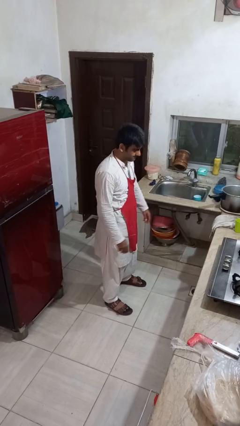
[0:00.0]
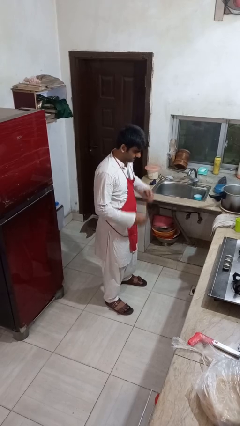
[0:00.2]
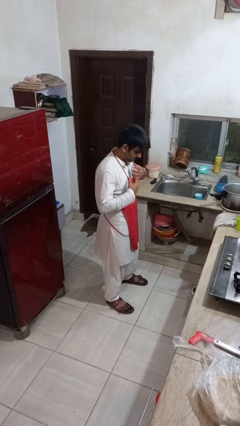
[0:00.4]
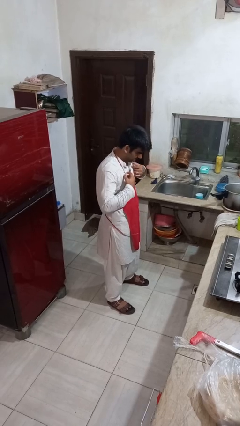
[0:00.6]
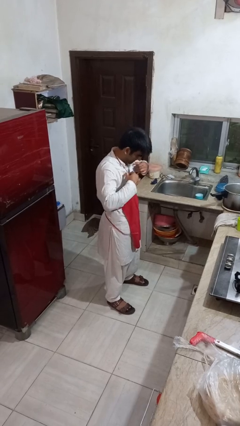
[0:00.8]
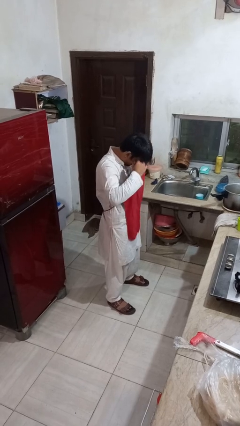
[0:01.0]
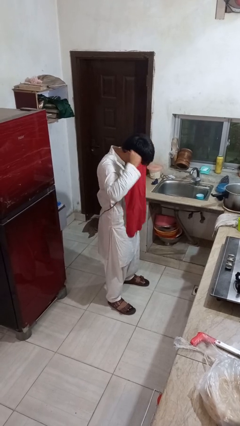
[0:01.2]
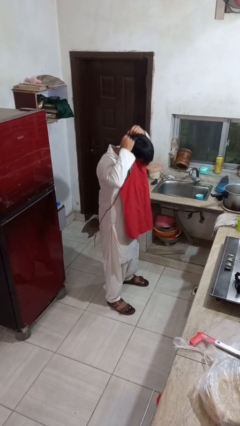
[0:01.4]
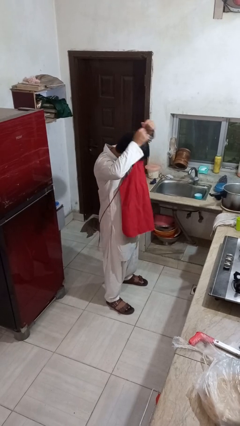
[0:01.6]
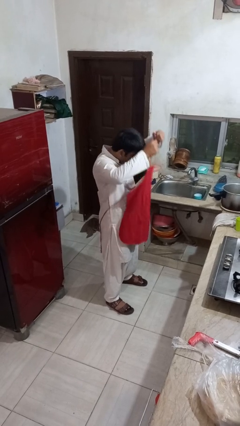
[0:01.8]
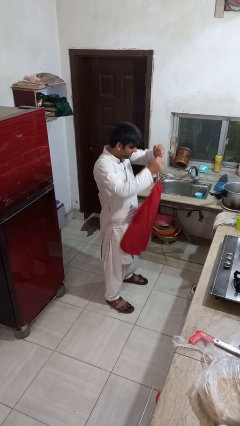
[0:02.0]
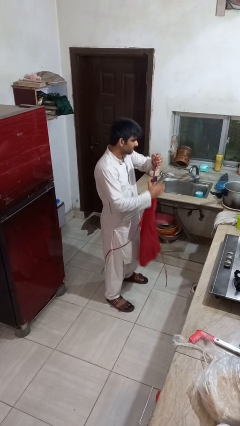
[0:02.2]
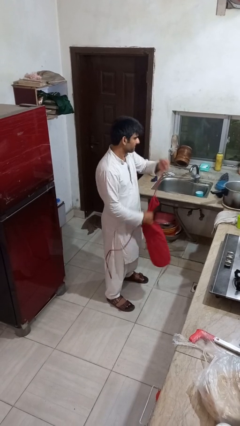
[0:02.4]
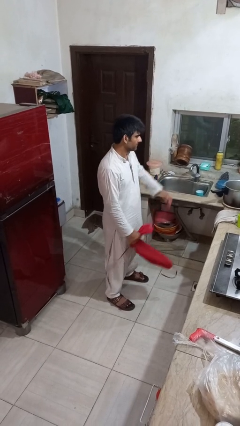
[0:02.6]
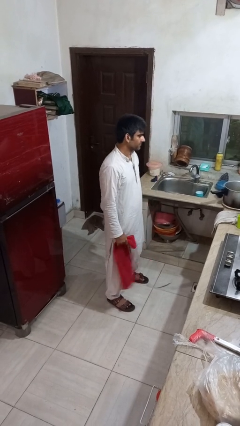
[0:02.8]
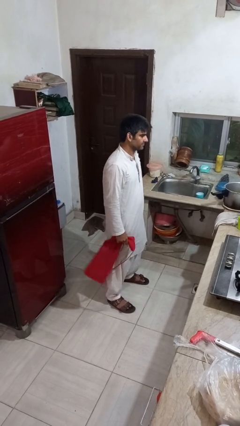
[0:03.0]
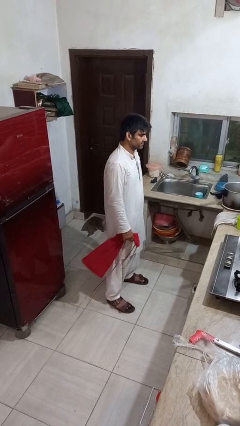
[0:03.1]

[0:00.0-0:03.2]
person takes off apron

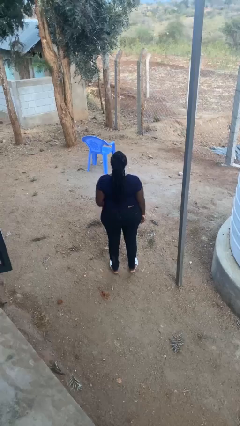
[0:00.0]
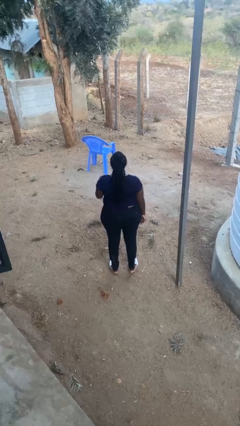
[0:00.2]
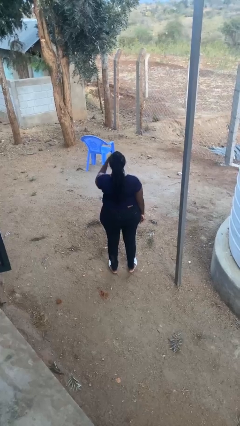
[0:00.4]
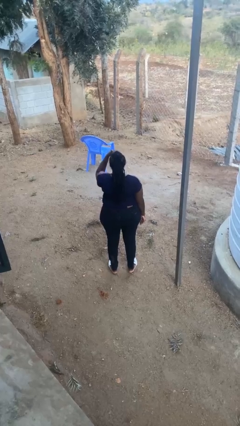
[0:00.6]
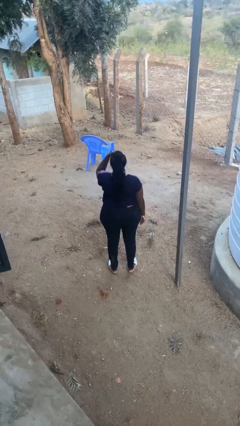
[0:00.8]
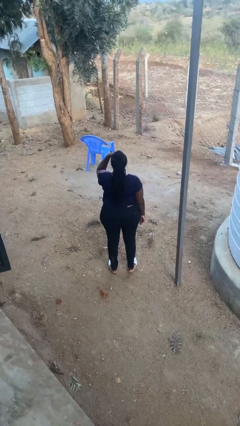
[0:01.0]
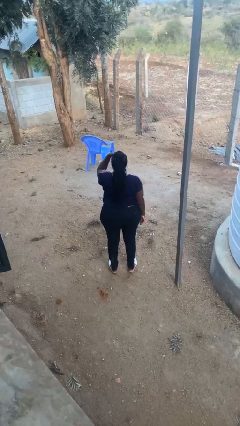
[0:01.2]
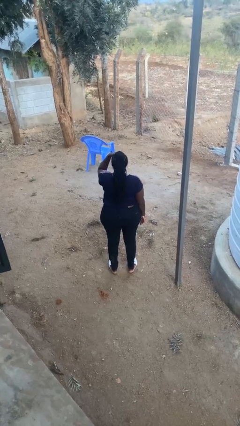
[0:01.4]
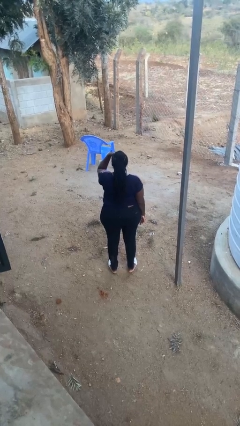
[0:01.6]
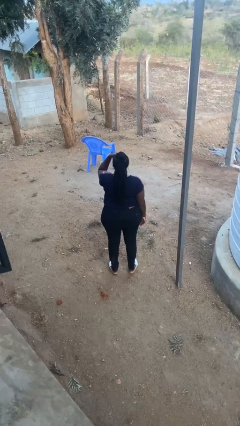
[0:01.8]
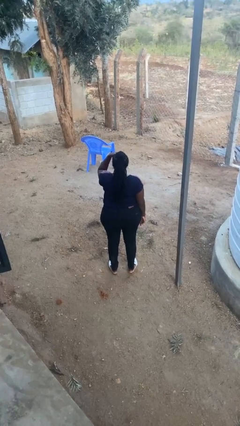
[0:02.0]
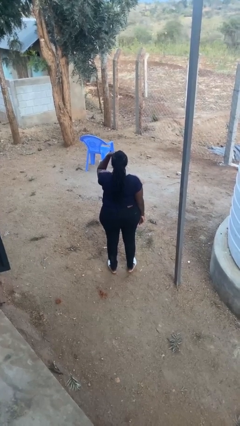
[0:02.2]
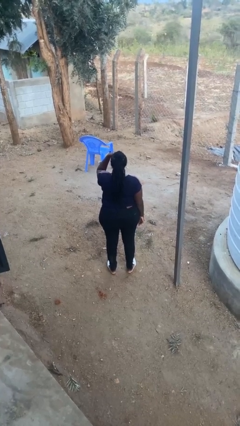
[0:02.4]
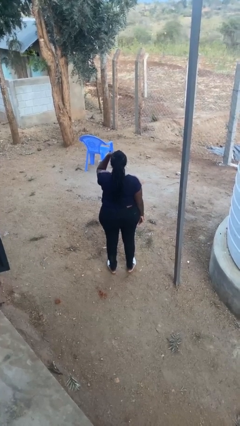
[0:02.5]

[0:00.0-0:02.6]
person shades eyes

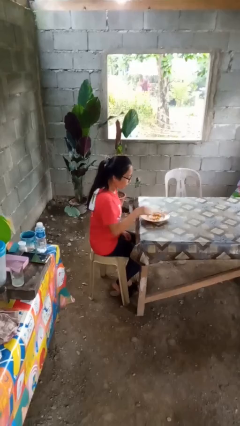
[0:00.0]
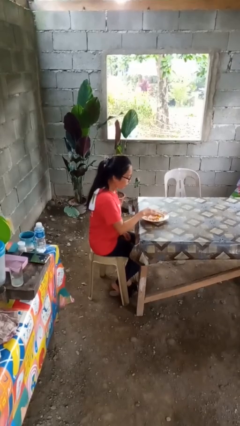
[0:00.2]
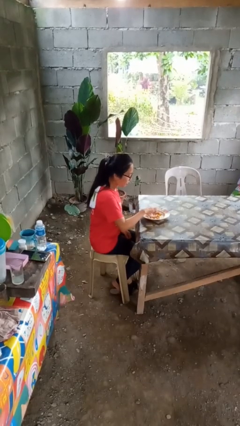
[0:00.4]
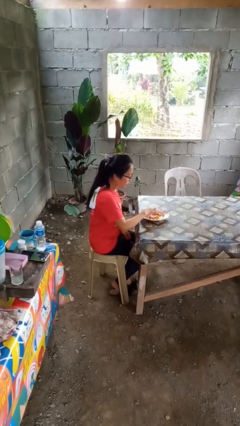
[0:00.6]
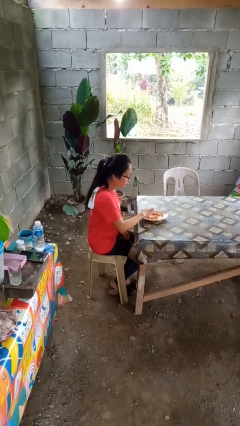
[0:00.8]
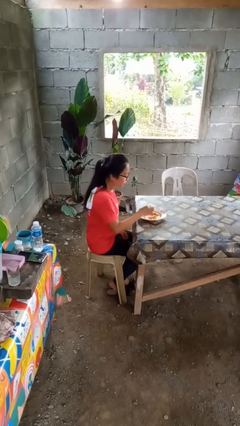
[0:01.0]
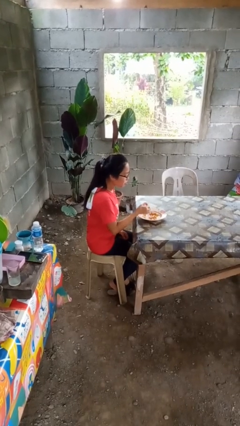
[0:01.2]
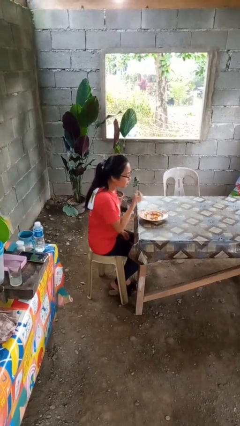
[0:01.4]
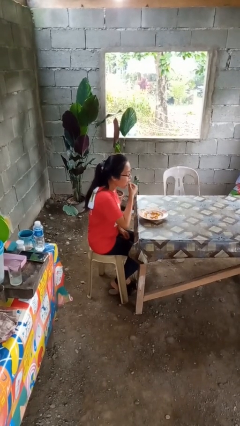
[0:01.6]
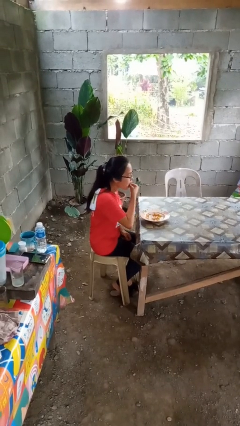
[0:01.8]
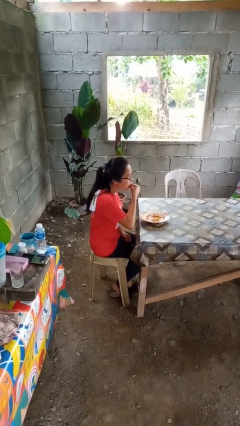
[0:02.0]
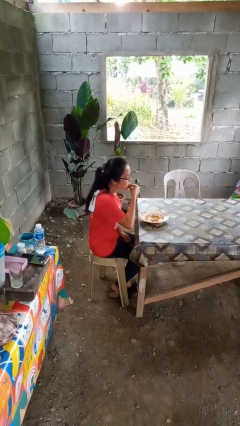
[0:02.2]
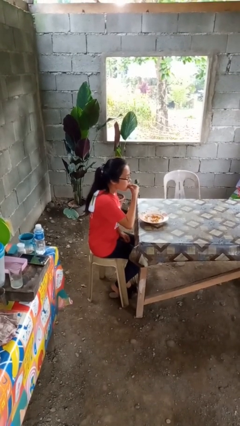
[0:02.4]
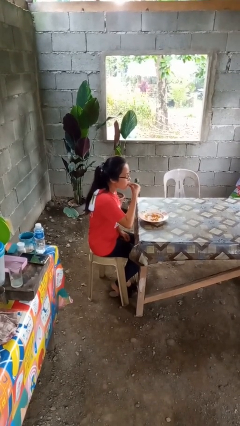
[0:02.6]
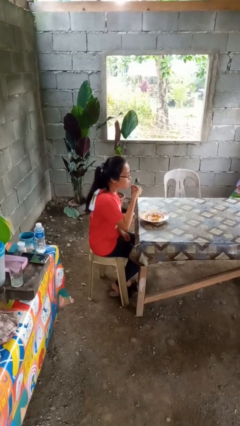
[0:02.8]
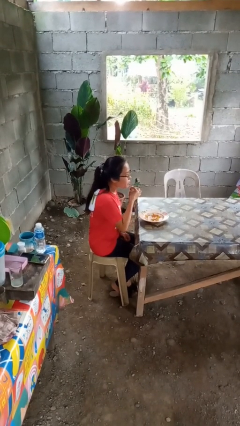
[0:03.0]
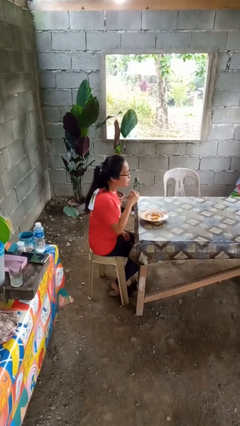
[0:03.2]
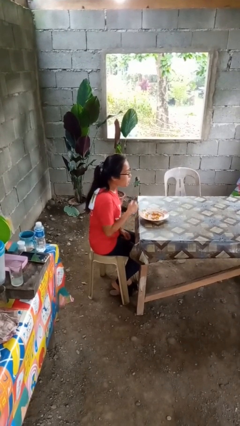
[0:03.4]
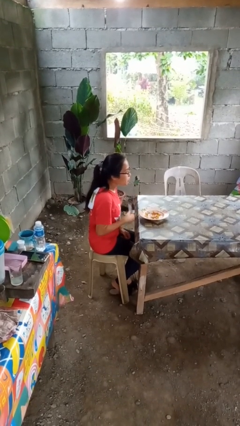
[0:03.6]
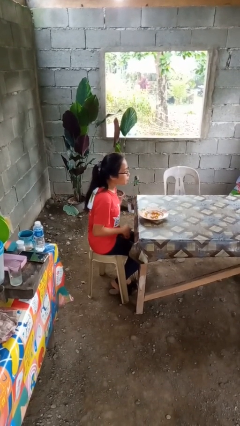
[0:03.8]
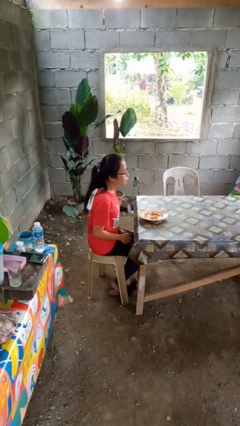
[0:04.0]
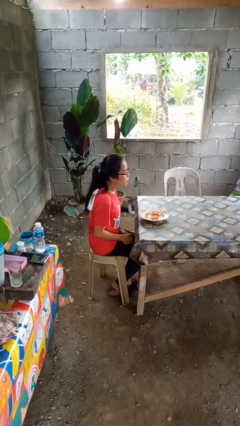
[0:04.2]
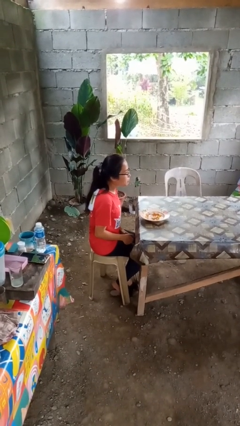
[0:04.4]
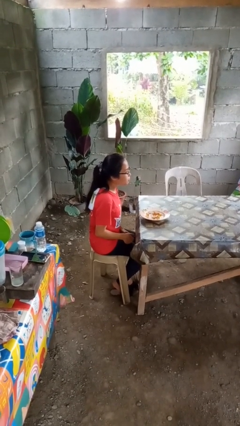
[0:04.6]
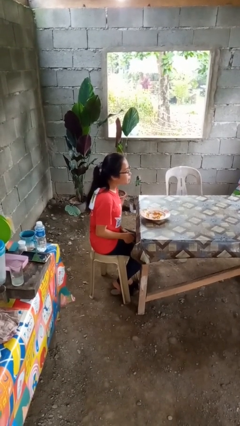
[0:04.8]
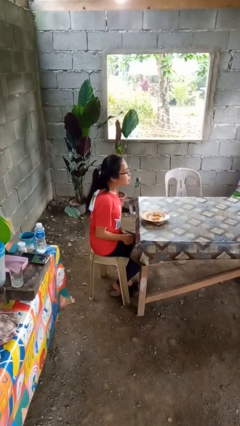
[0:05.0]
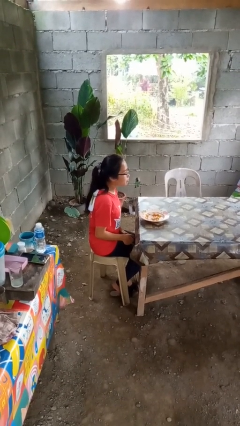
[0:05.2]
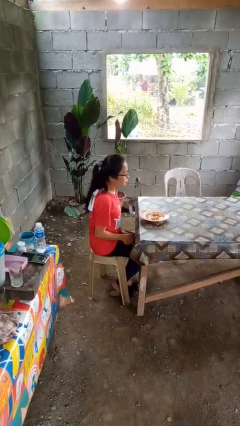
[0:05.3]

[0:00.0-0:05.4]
person eats with hands

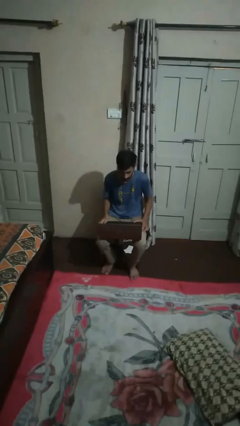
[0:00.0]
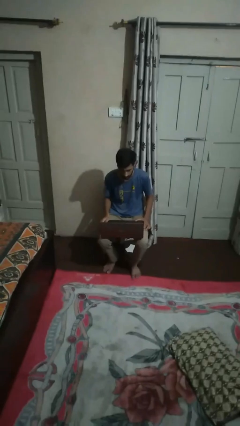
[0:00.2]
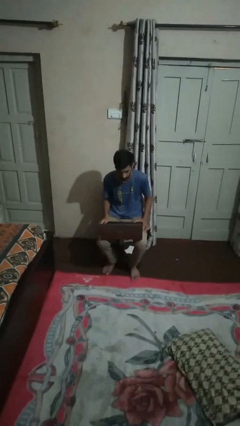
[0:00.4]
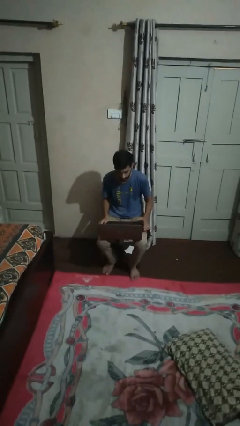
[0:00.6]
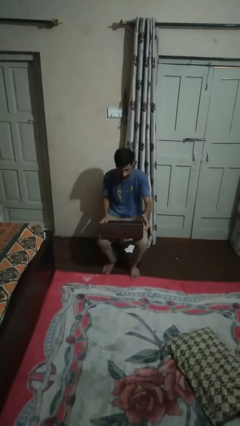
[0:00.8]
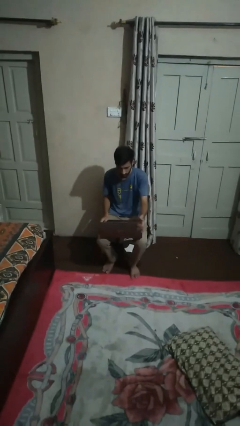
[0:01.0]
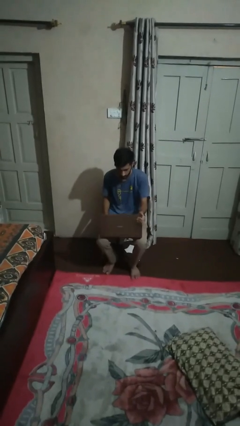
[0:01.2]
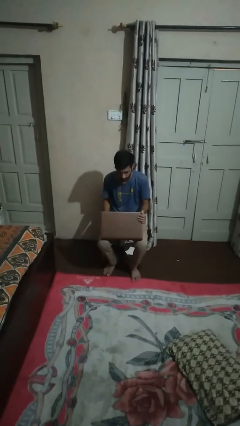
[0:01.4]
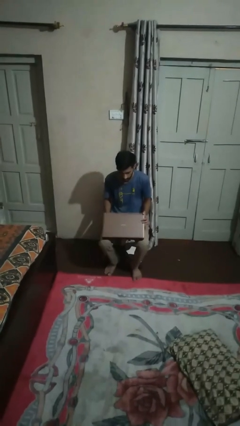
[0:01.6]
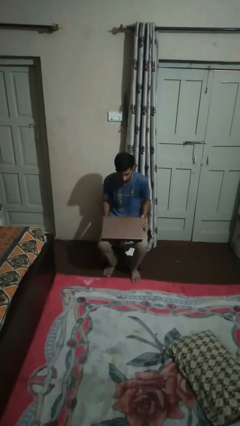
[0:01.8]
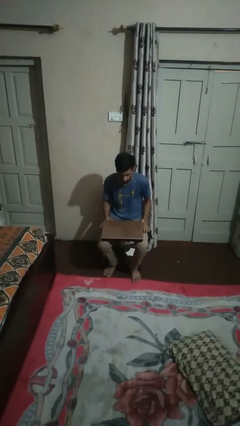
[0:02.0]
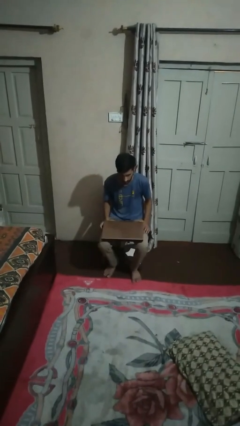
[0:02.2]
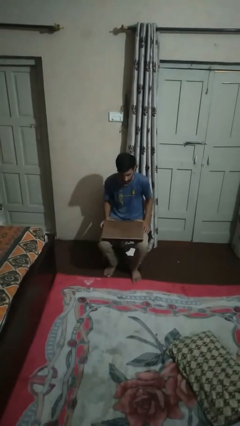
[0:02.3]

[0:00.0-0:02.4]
person closes laptop

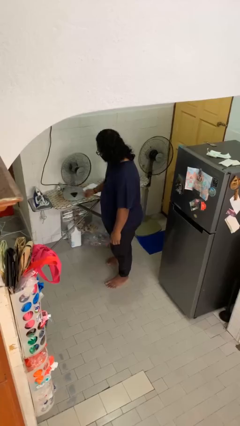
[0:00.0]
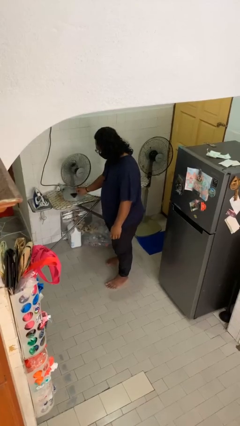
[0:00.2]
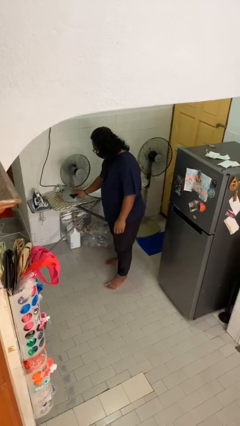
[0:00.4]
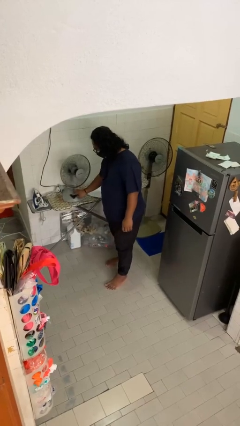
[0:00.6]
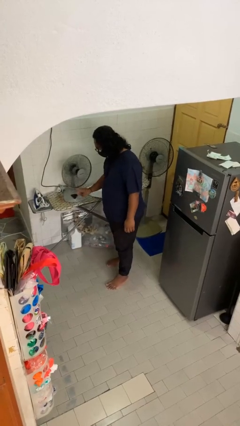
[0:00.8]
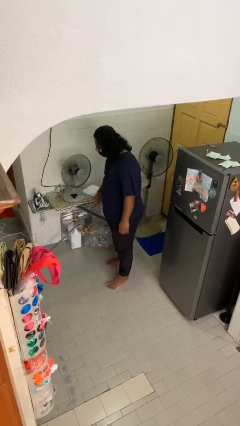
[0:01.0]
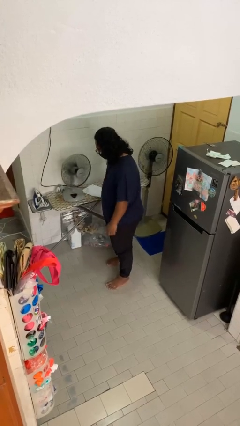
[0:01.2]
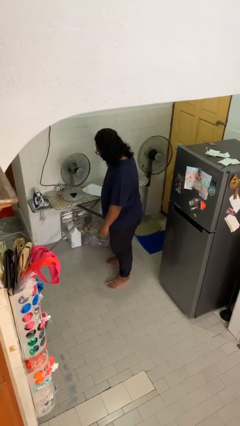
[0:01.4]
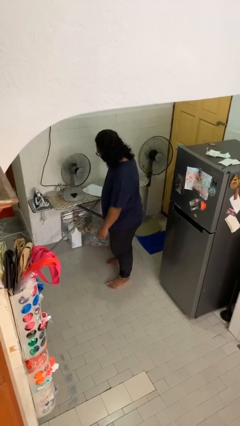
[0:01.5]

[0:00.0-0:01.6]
person turns on fan

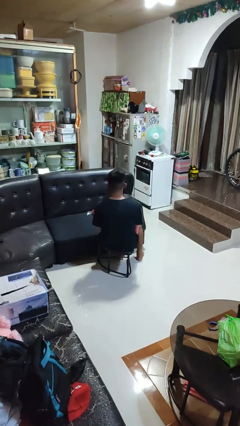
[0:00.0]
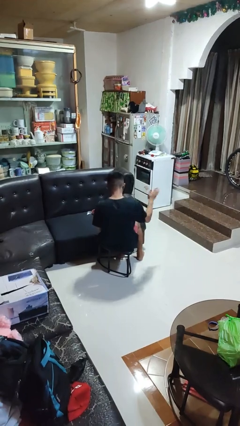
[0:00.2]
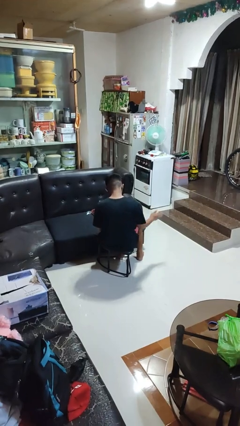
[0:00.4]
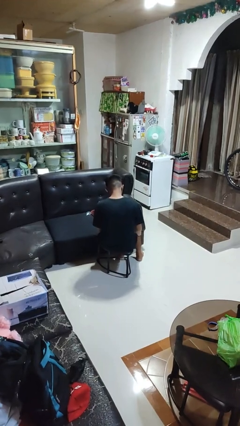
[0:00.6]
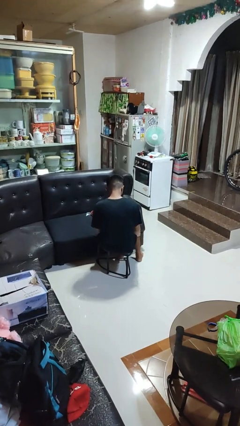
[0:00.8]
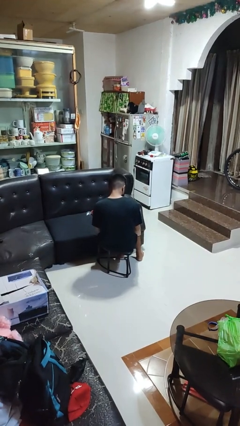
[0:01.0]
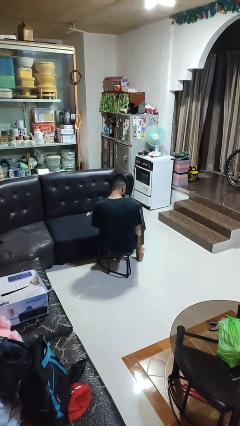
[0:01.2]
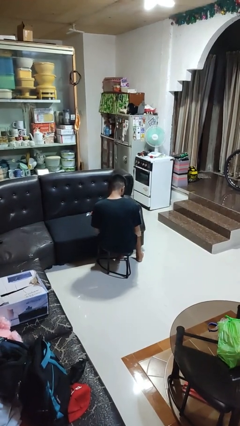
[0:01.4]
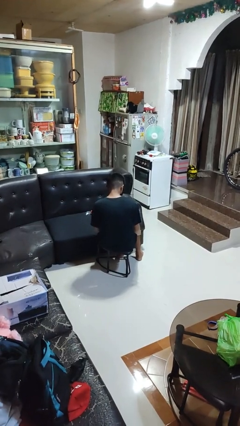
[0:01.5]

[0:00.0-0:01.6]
person swats bug

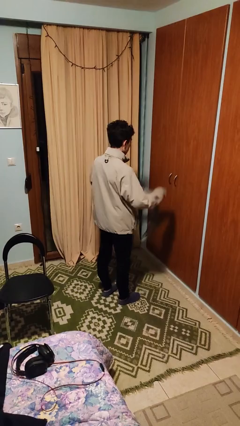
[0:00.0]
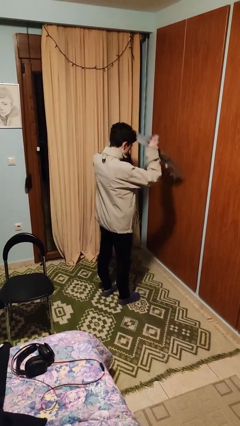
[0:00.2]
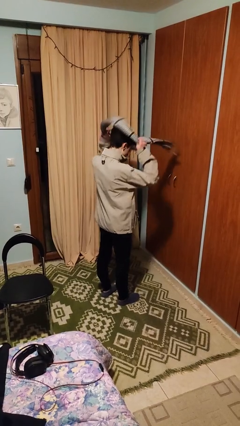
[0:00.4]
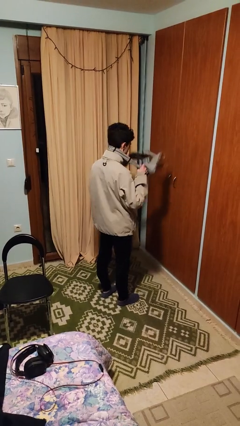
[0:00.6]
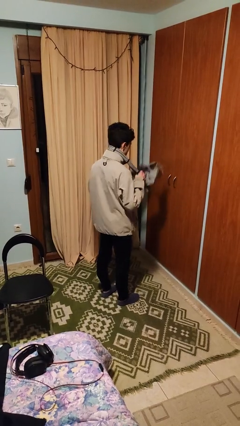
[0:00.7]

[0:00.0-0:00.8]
person puts on scarf
